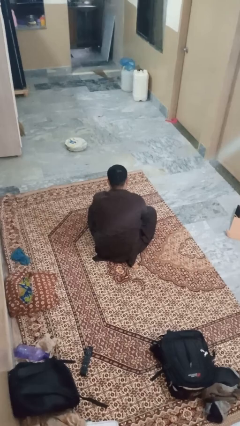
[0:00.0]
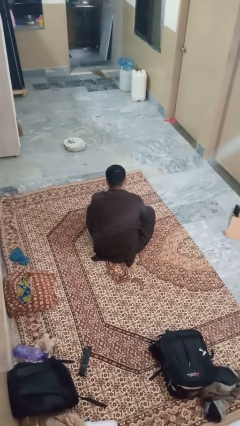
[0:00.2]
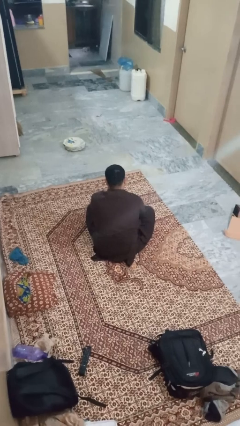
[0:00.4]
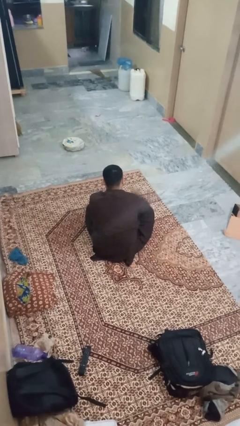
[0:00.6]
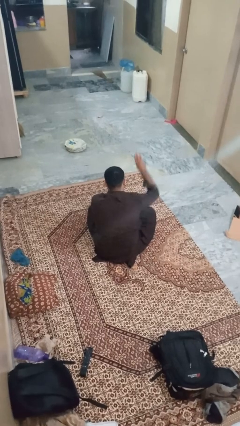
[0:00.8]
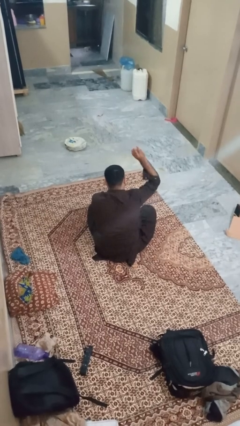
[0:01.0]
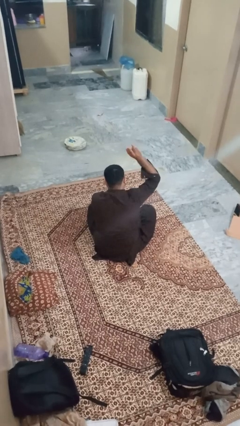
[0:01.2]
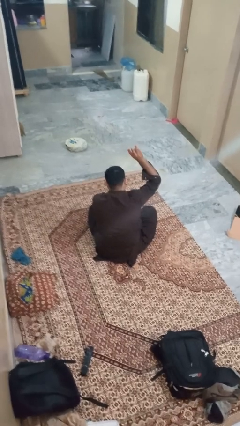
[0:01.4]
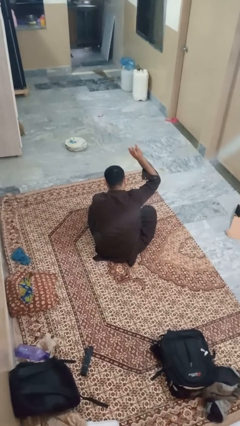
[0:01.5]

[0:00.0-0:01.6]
person gestures number three

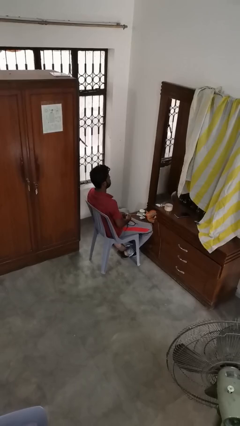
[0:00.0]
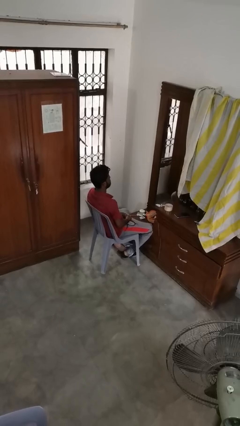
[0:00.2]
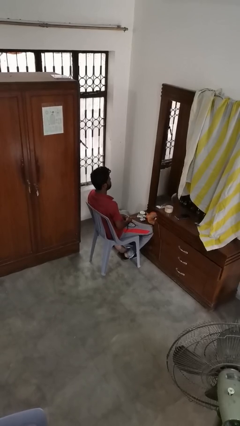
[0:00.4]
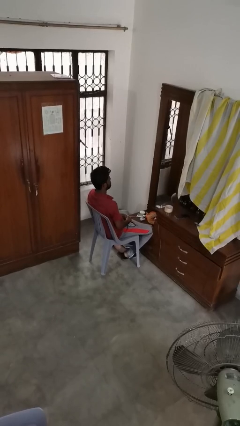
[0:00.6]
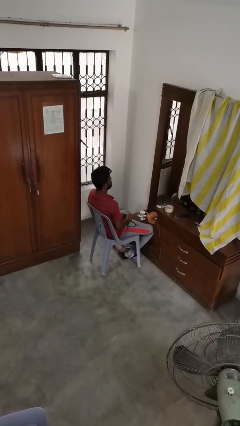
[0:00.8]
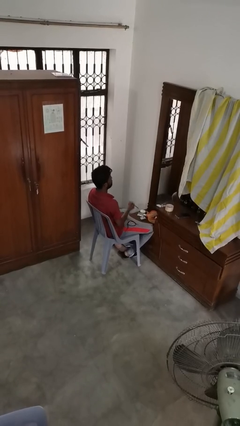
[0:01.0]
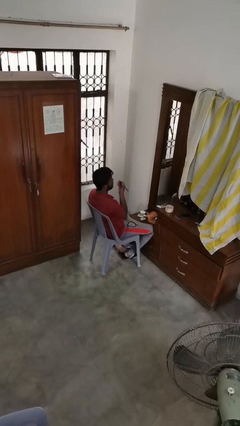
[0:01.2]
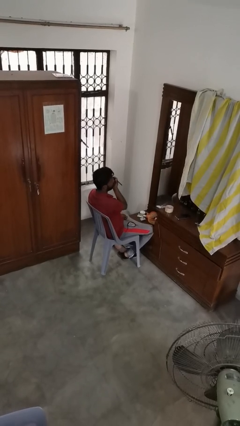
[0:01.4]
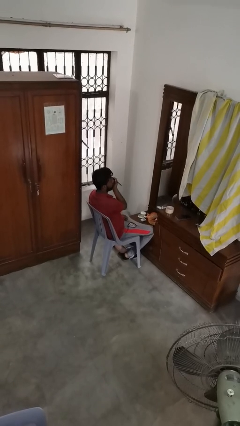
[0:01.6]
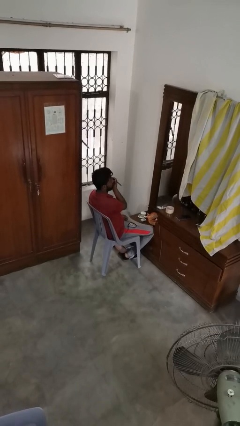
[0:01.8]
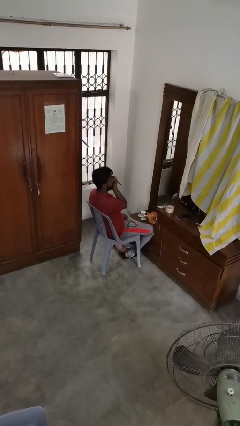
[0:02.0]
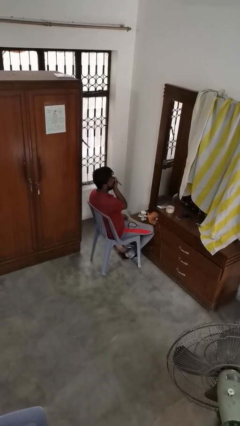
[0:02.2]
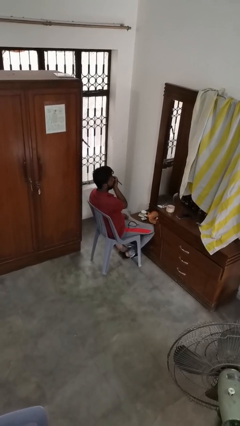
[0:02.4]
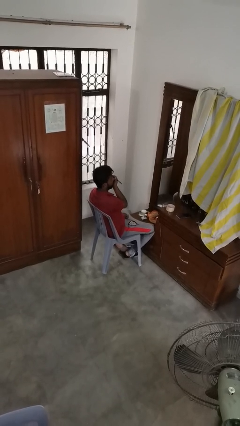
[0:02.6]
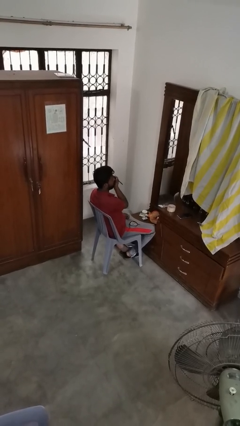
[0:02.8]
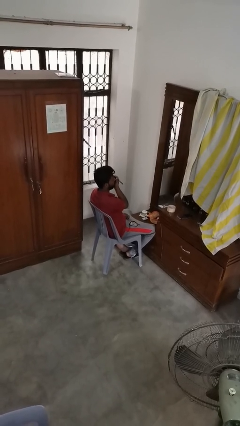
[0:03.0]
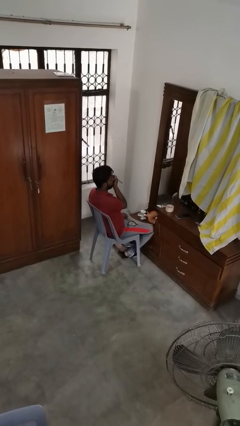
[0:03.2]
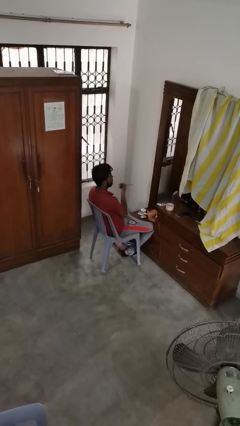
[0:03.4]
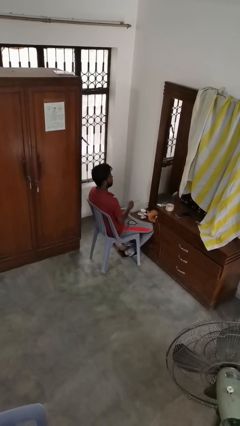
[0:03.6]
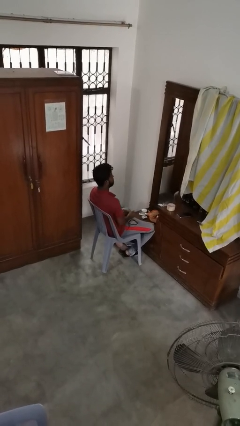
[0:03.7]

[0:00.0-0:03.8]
person applies eye makeup

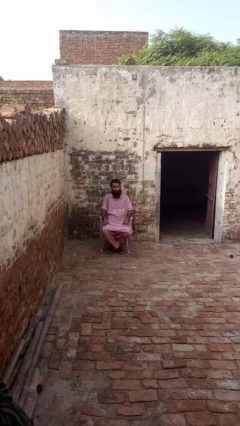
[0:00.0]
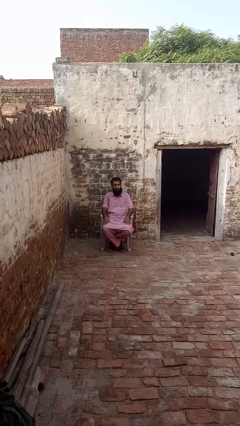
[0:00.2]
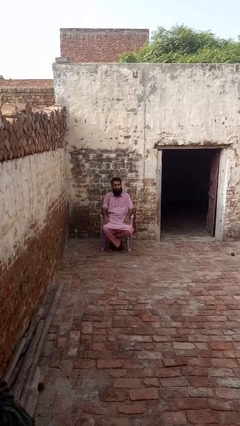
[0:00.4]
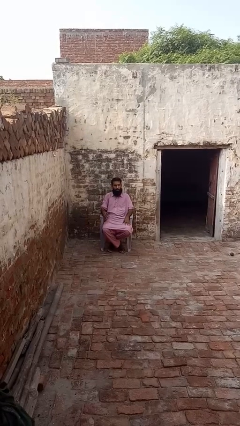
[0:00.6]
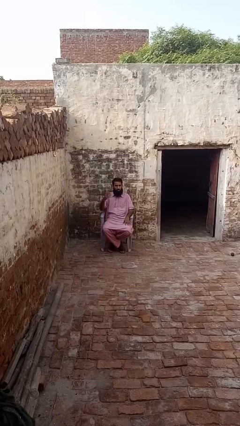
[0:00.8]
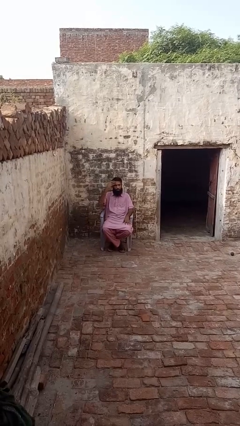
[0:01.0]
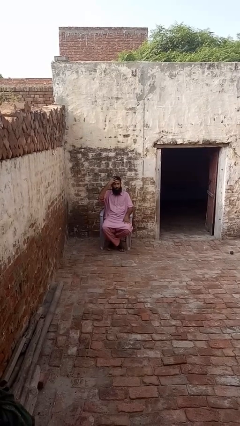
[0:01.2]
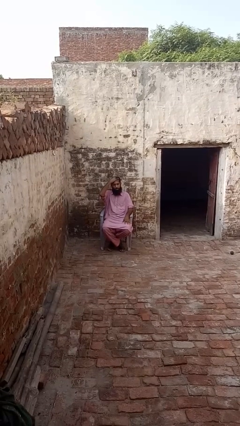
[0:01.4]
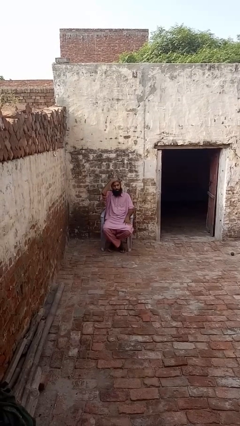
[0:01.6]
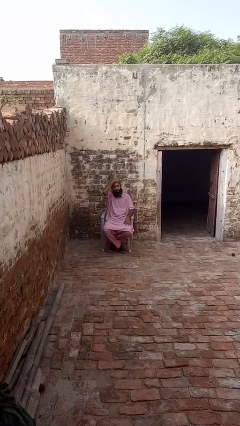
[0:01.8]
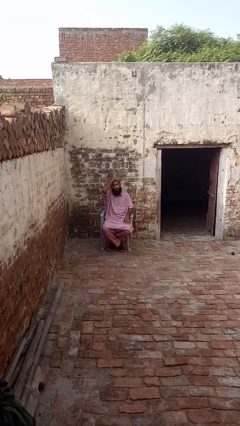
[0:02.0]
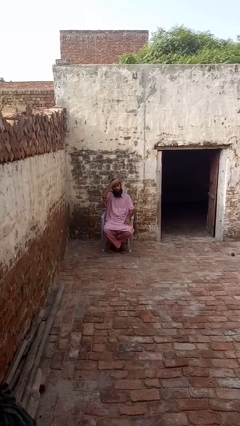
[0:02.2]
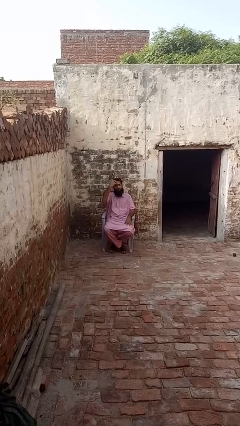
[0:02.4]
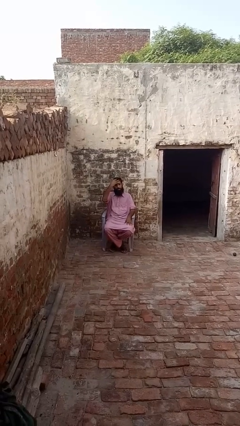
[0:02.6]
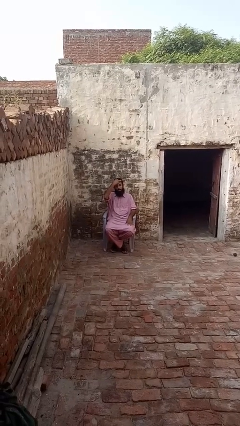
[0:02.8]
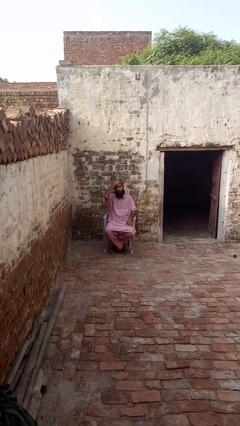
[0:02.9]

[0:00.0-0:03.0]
person strokes hair

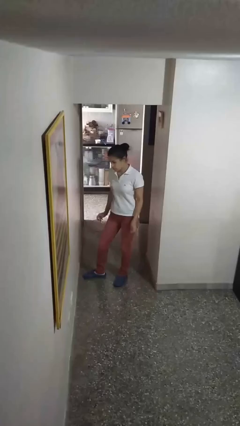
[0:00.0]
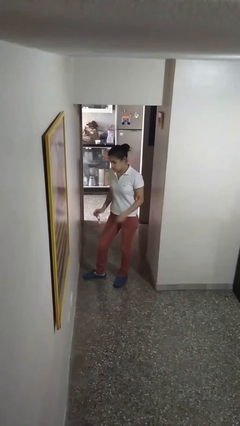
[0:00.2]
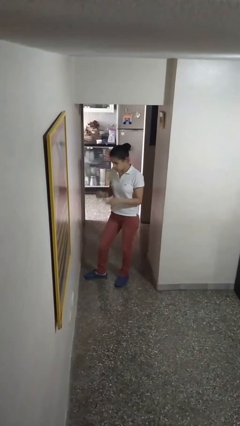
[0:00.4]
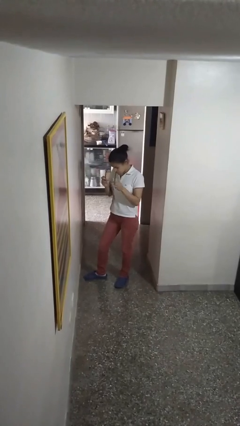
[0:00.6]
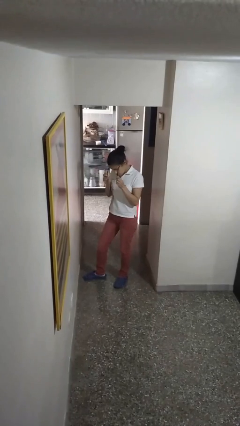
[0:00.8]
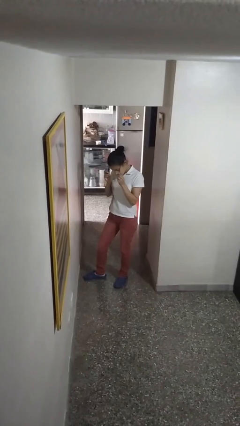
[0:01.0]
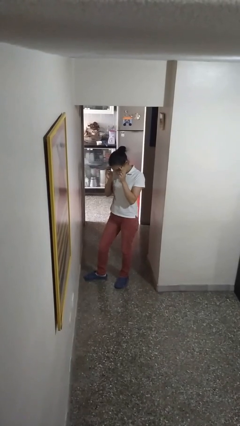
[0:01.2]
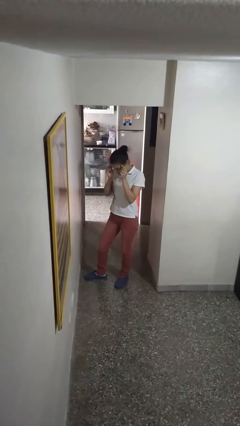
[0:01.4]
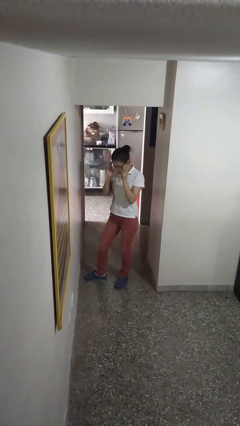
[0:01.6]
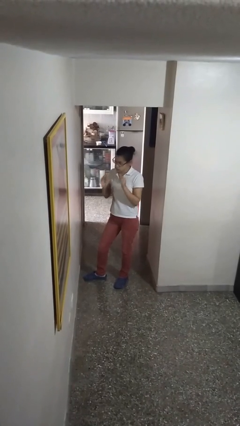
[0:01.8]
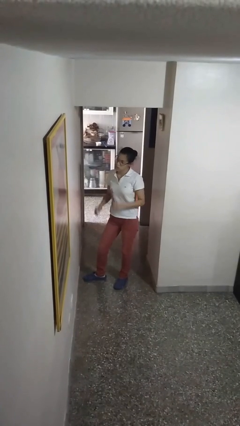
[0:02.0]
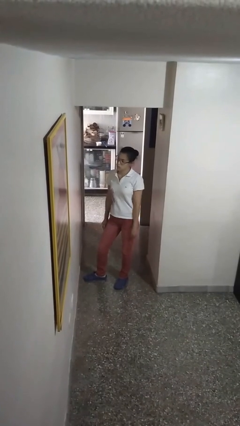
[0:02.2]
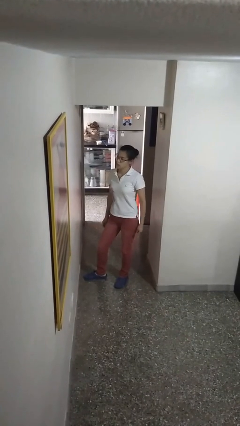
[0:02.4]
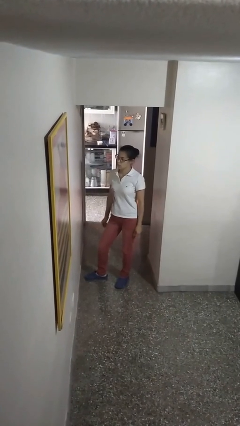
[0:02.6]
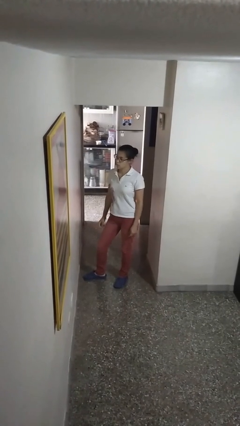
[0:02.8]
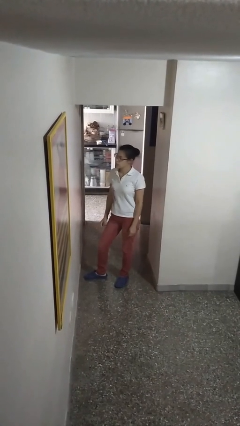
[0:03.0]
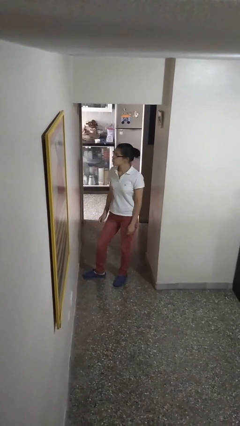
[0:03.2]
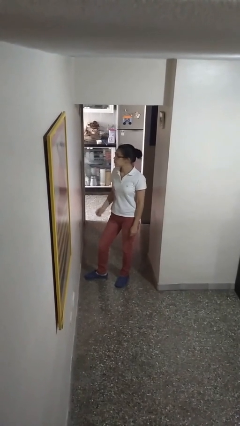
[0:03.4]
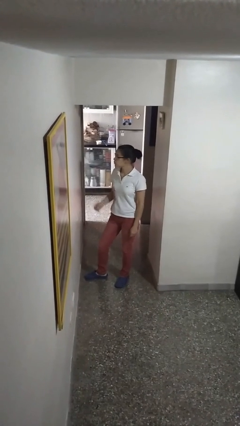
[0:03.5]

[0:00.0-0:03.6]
person puts on glasses

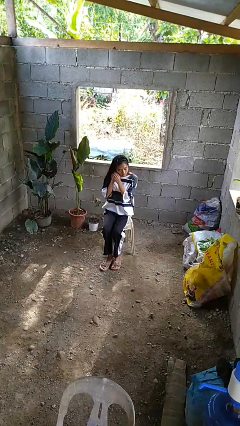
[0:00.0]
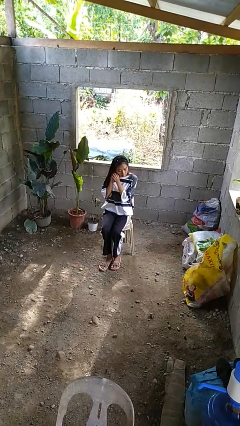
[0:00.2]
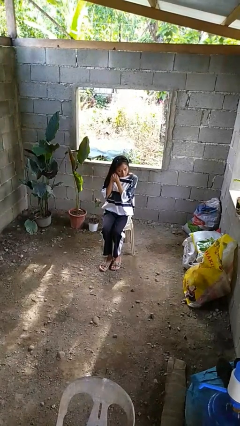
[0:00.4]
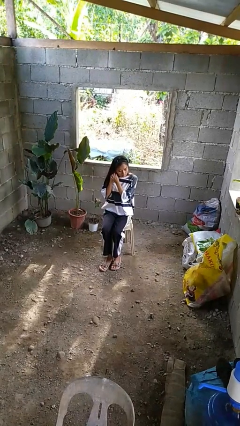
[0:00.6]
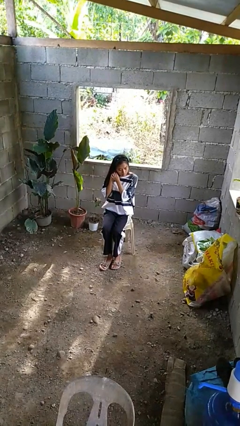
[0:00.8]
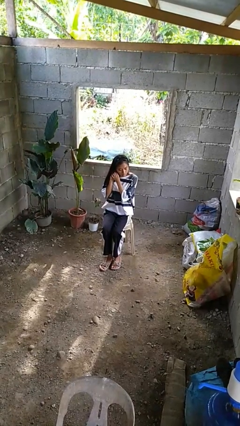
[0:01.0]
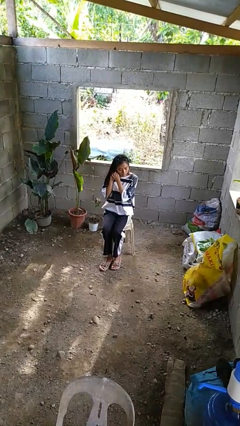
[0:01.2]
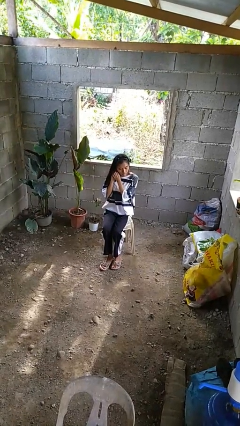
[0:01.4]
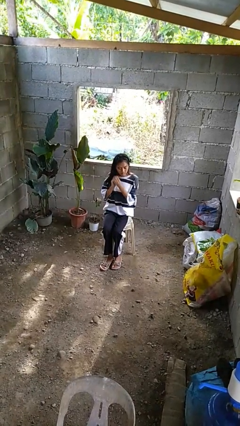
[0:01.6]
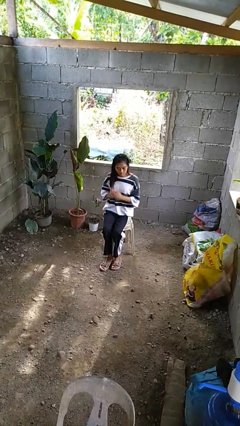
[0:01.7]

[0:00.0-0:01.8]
person takes off earrings

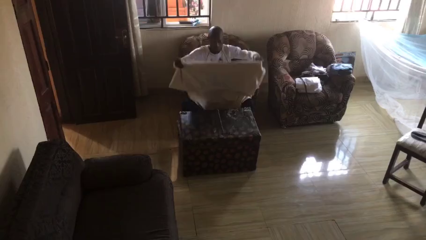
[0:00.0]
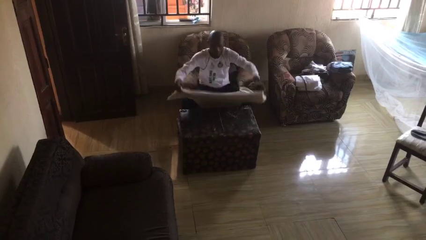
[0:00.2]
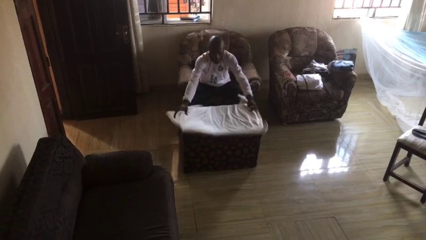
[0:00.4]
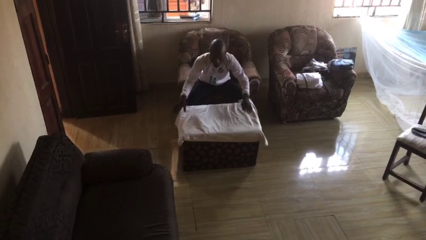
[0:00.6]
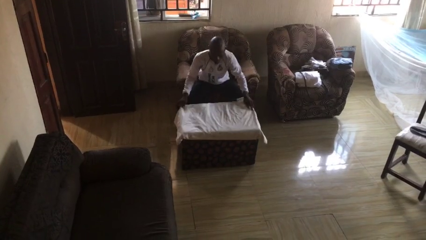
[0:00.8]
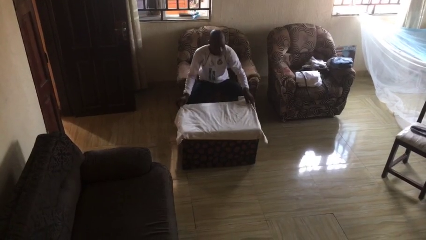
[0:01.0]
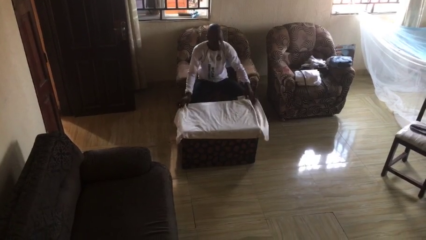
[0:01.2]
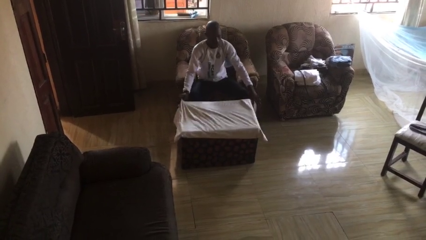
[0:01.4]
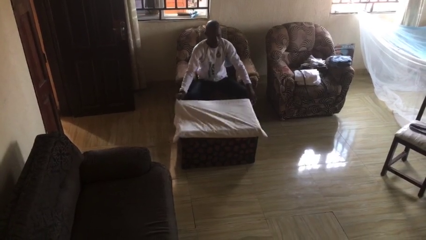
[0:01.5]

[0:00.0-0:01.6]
person spreads tablecloth

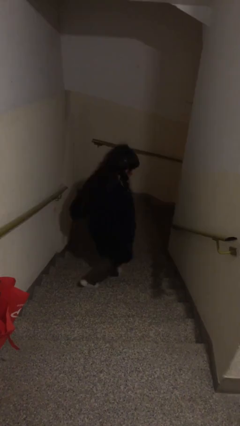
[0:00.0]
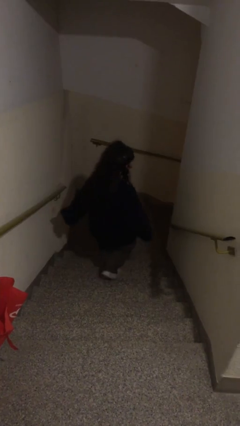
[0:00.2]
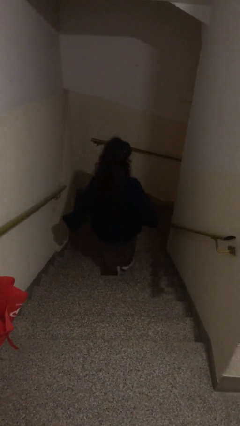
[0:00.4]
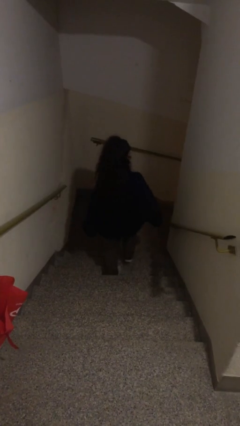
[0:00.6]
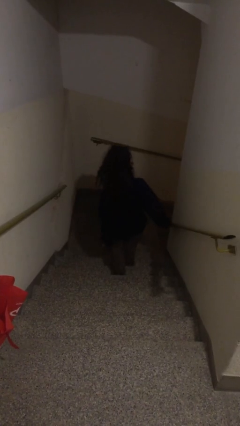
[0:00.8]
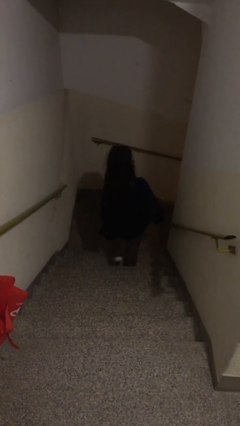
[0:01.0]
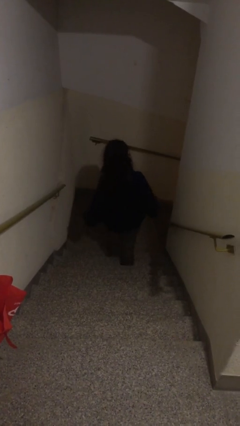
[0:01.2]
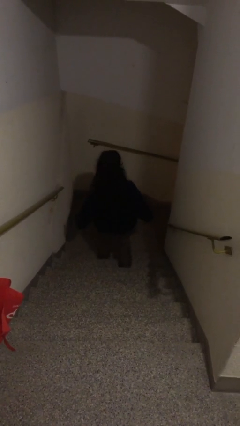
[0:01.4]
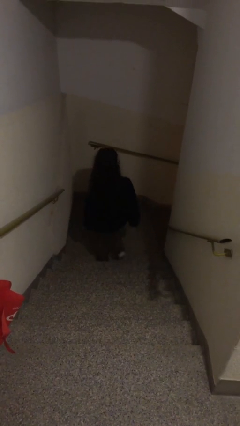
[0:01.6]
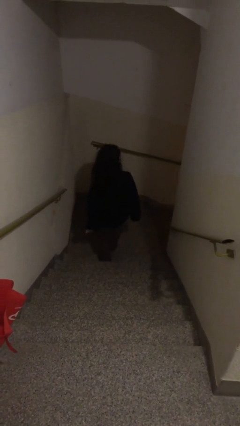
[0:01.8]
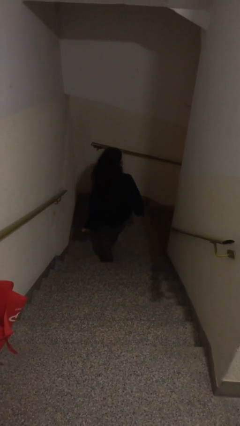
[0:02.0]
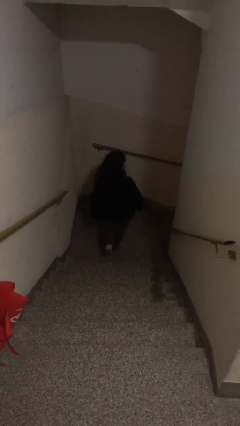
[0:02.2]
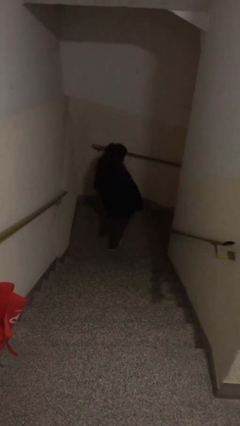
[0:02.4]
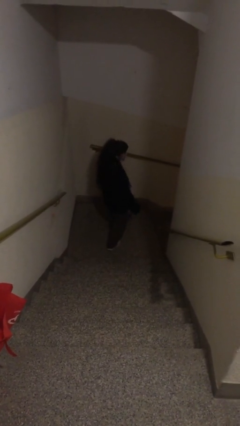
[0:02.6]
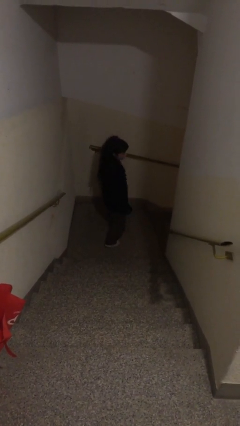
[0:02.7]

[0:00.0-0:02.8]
person climbs down stairs
